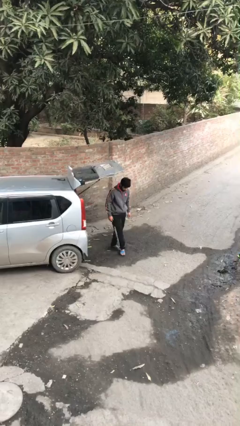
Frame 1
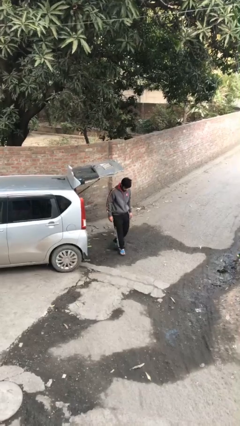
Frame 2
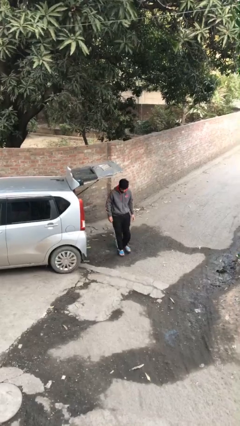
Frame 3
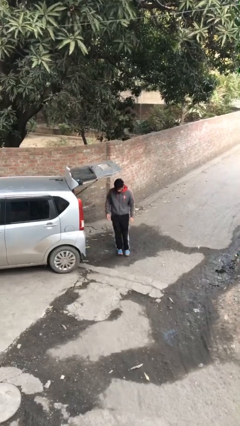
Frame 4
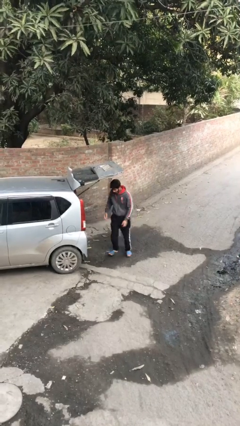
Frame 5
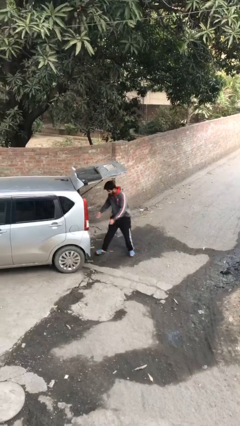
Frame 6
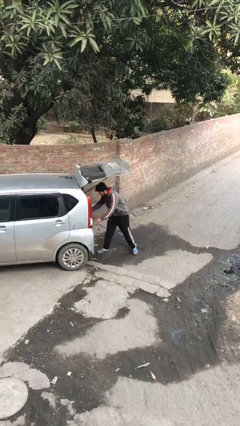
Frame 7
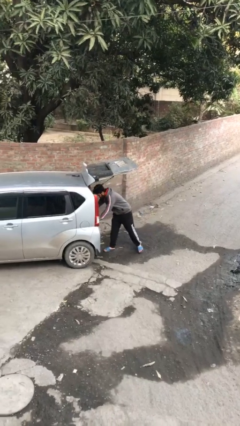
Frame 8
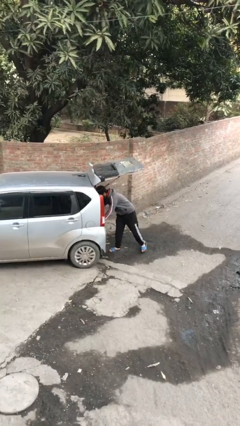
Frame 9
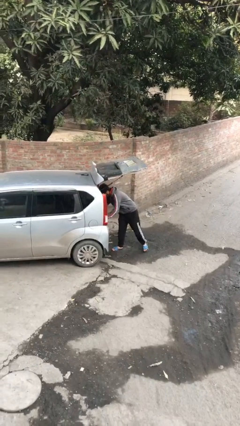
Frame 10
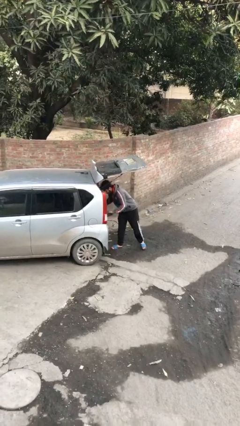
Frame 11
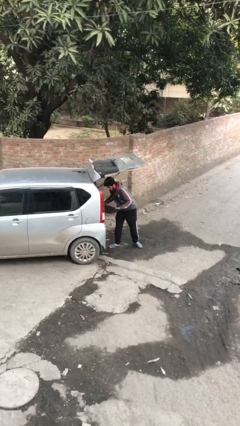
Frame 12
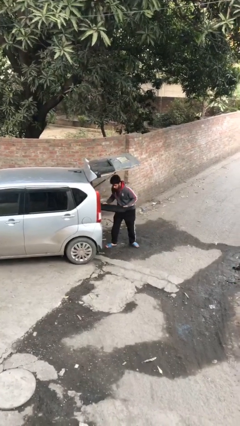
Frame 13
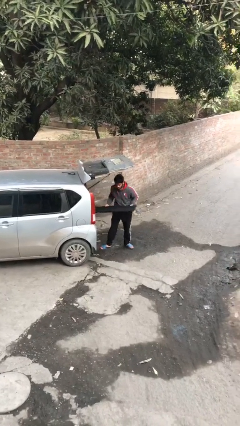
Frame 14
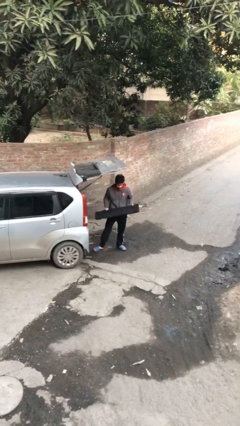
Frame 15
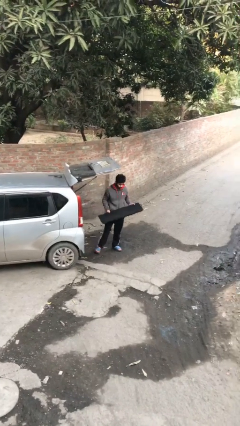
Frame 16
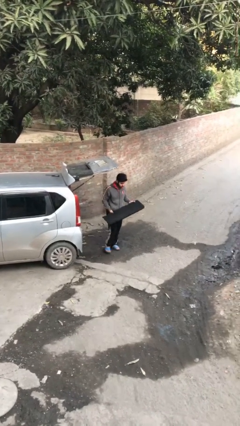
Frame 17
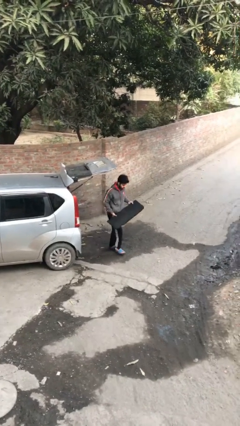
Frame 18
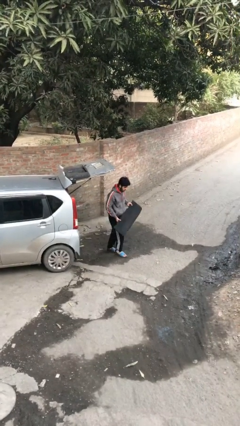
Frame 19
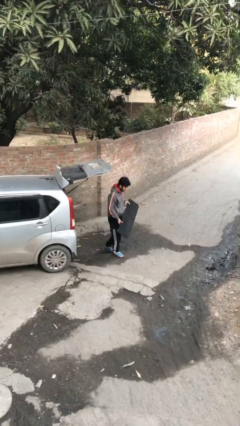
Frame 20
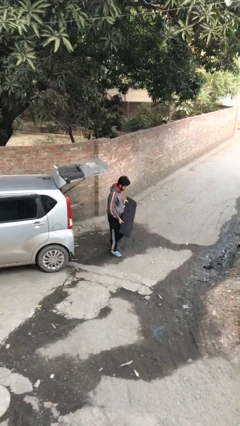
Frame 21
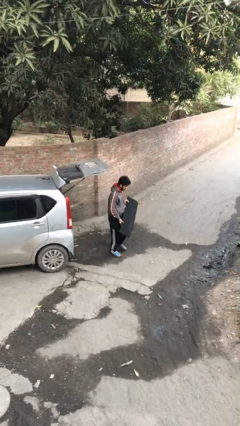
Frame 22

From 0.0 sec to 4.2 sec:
person unloads car

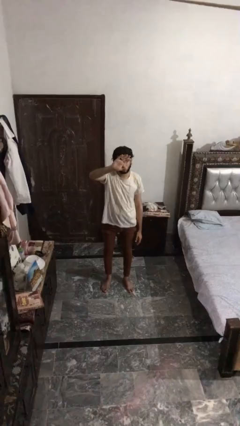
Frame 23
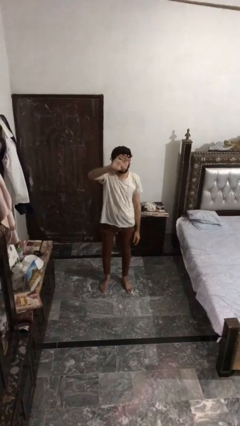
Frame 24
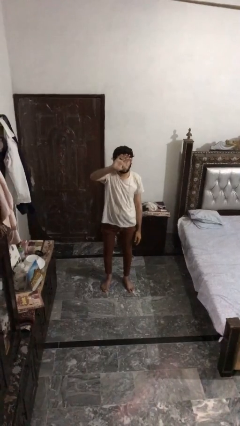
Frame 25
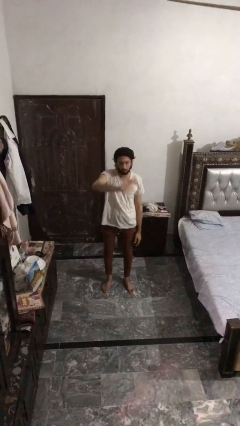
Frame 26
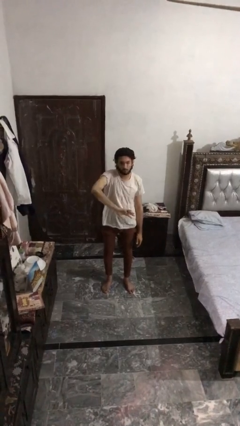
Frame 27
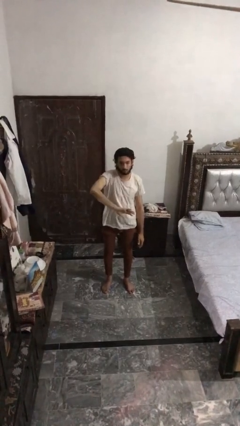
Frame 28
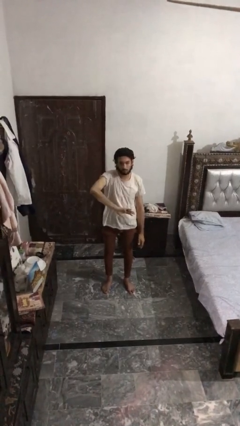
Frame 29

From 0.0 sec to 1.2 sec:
person gestures swipe down

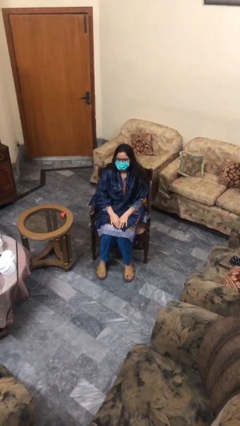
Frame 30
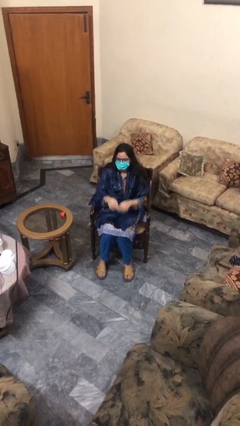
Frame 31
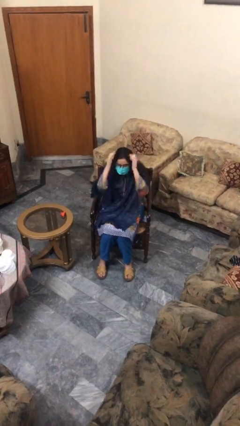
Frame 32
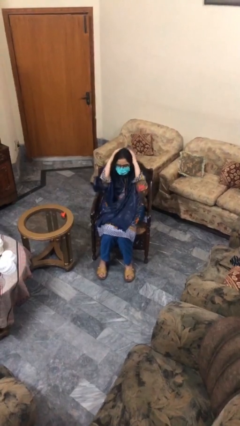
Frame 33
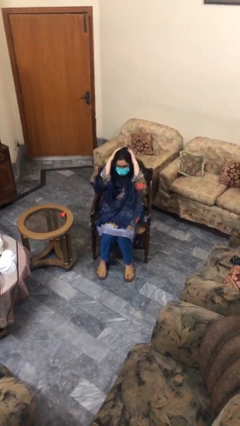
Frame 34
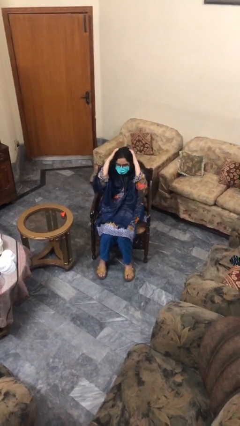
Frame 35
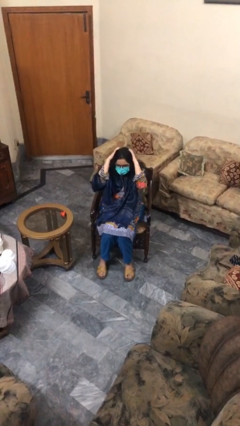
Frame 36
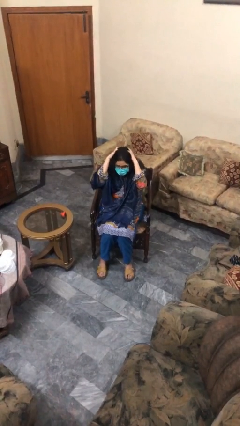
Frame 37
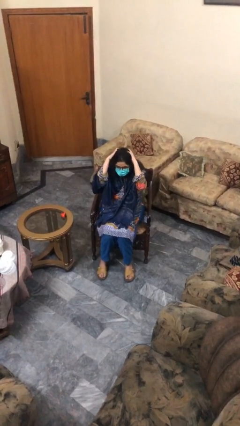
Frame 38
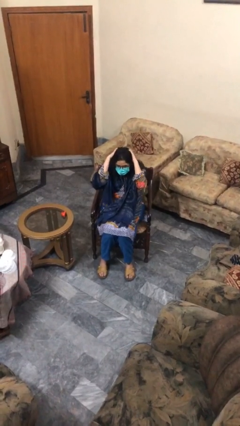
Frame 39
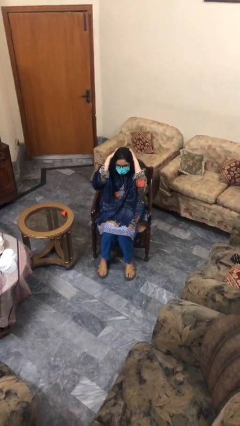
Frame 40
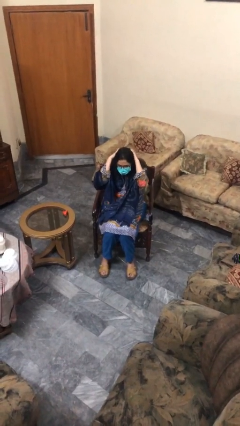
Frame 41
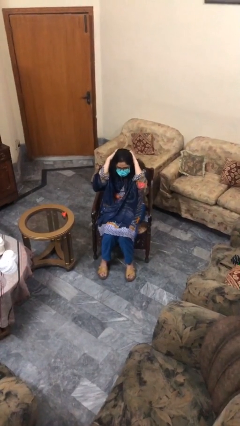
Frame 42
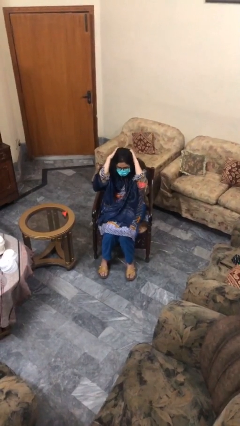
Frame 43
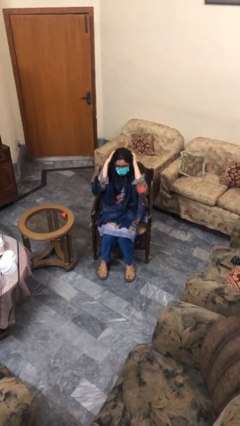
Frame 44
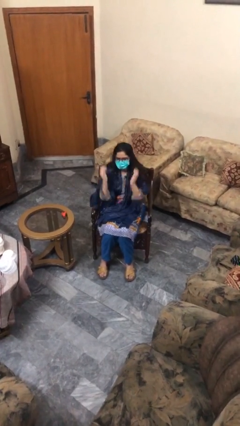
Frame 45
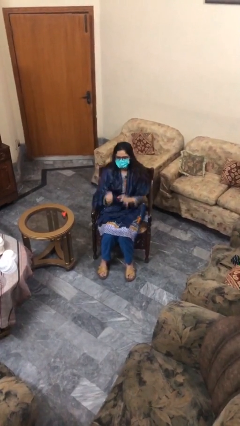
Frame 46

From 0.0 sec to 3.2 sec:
person pats head

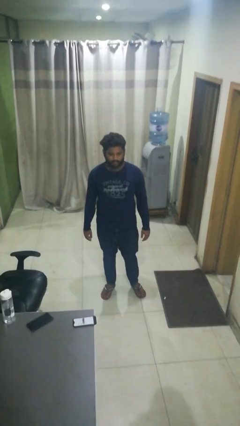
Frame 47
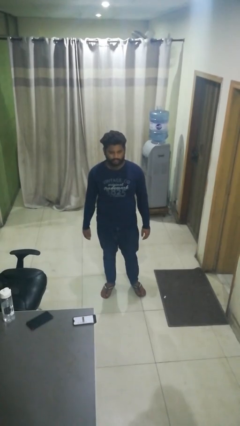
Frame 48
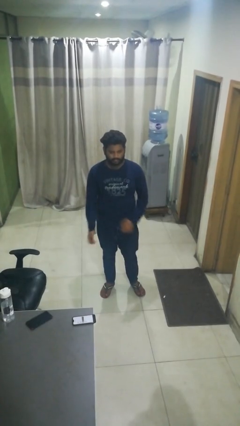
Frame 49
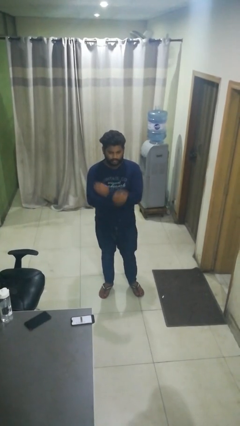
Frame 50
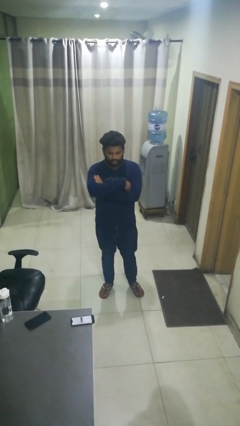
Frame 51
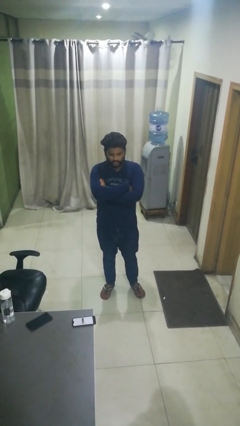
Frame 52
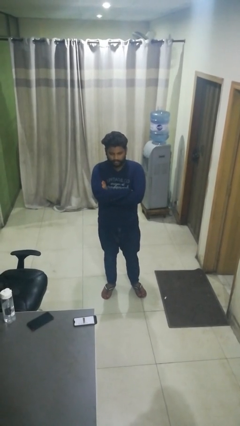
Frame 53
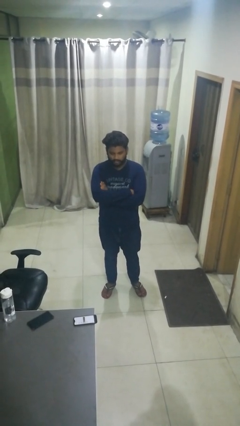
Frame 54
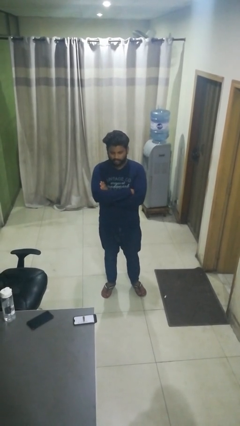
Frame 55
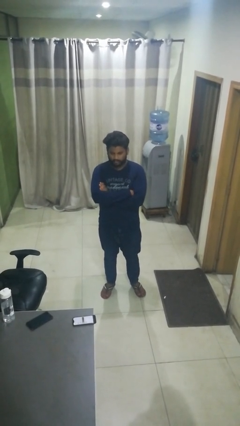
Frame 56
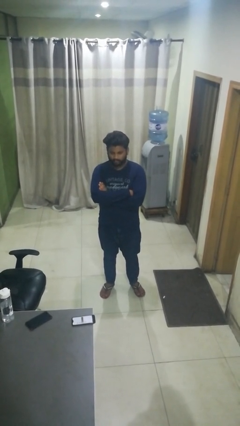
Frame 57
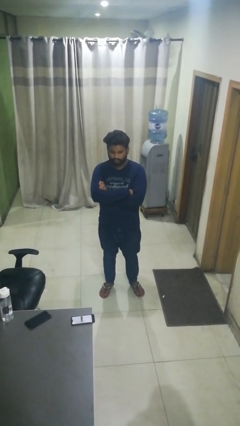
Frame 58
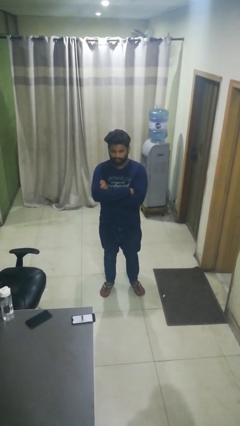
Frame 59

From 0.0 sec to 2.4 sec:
person crosses arms

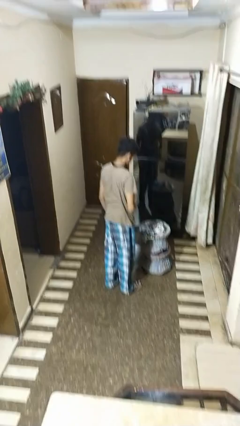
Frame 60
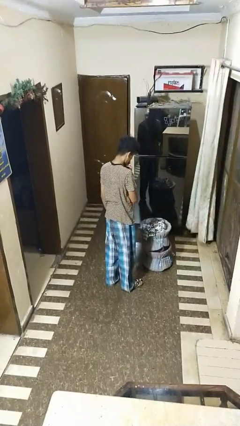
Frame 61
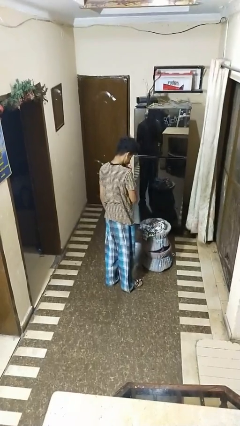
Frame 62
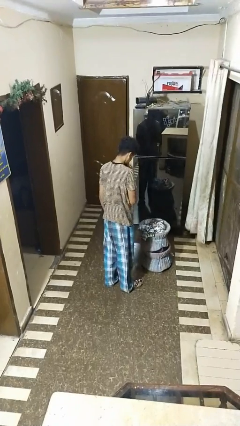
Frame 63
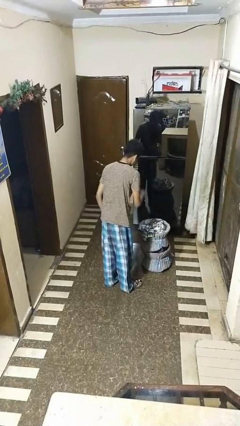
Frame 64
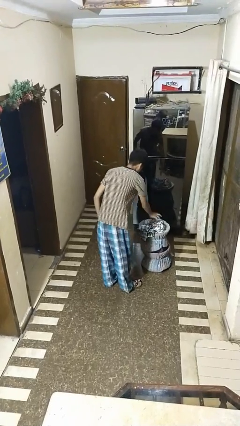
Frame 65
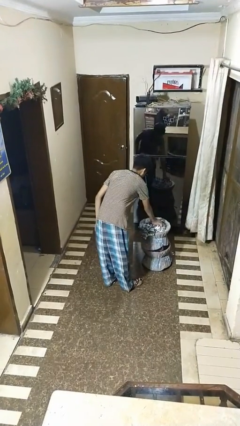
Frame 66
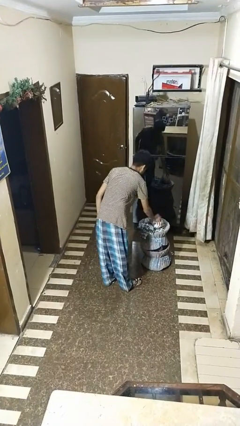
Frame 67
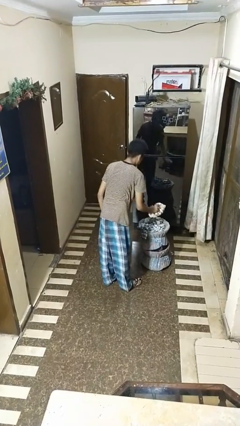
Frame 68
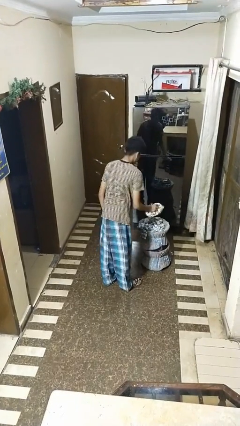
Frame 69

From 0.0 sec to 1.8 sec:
person takes object from basket

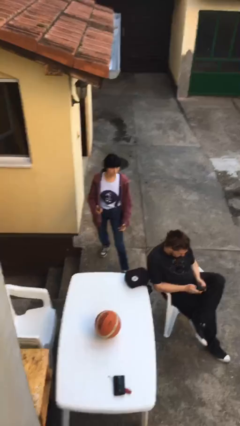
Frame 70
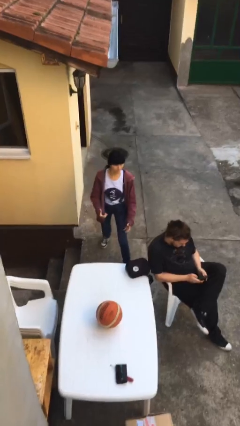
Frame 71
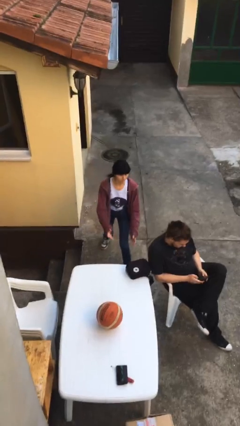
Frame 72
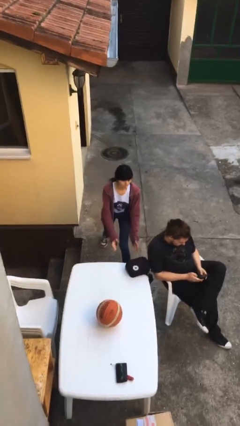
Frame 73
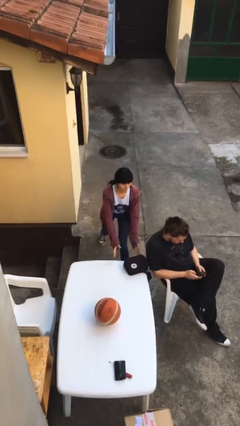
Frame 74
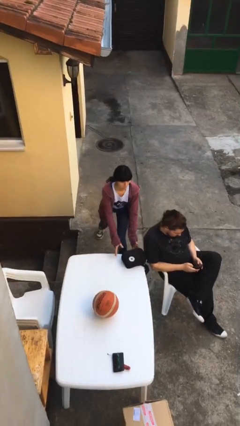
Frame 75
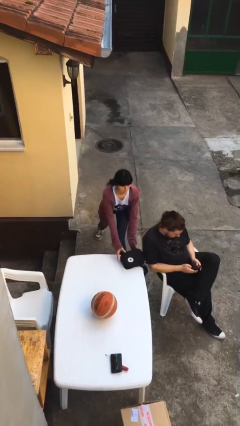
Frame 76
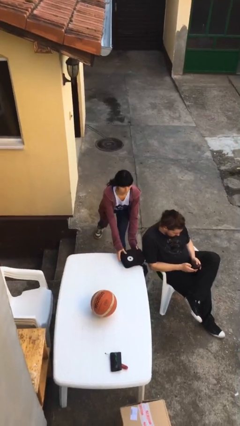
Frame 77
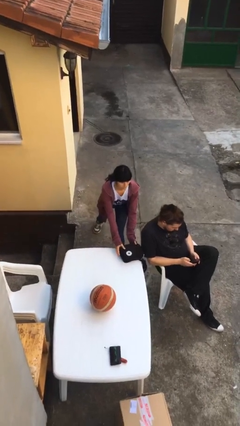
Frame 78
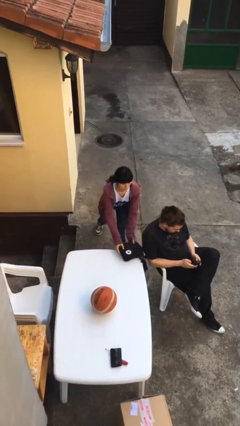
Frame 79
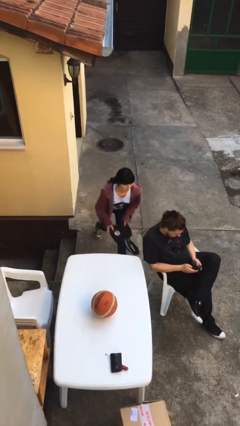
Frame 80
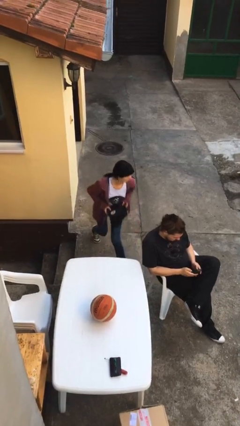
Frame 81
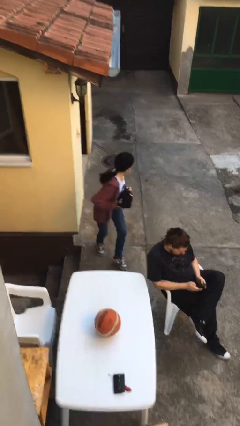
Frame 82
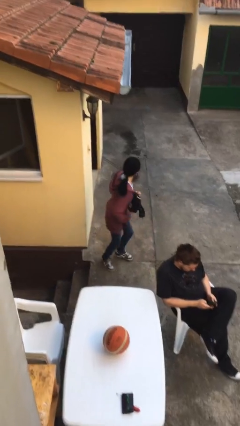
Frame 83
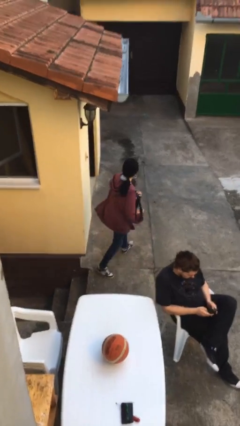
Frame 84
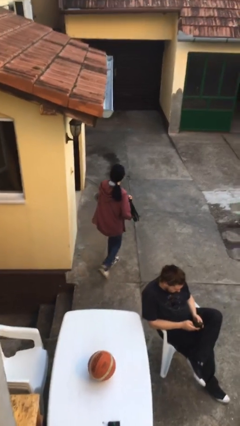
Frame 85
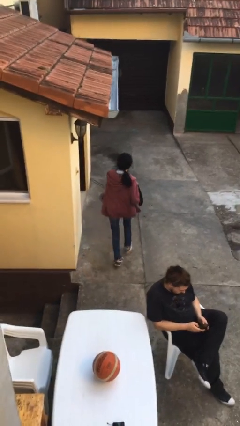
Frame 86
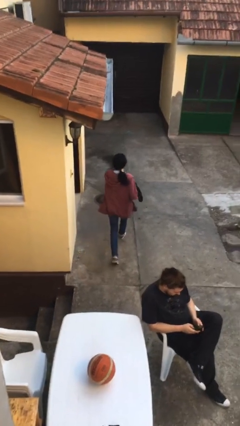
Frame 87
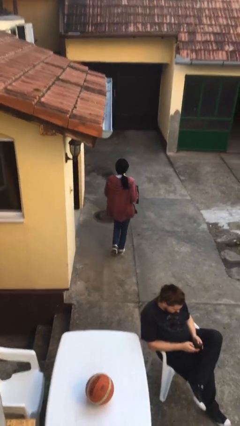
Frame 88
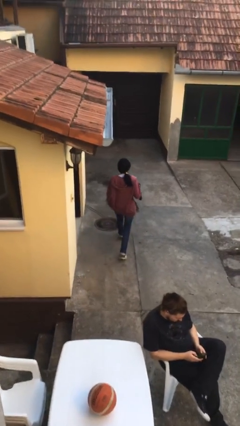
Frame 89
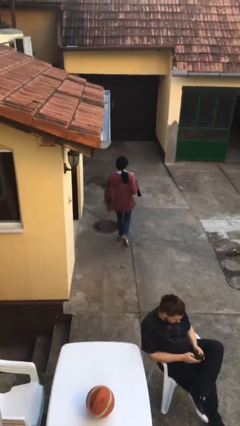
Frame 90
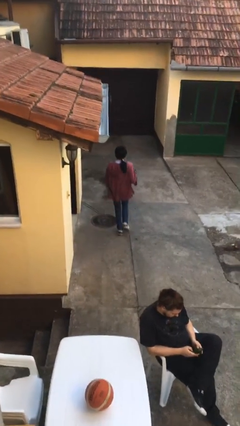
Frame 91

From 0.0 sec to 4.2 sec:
person steals object from person

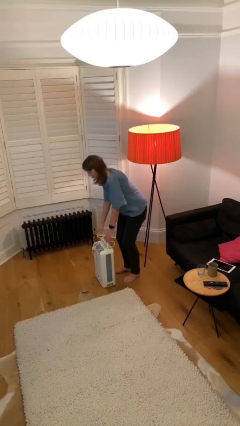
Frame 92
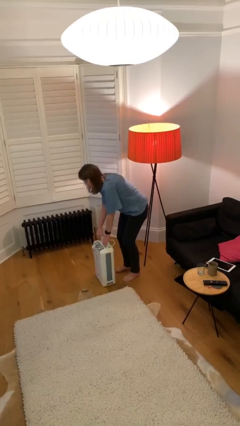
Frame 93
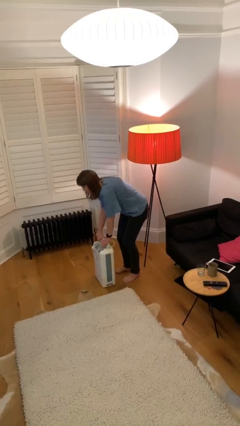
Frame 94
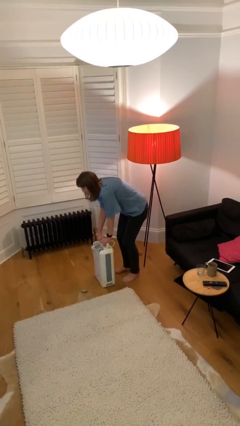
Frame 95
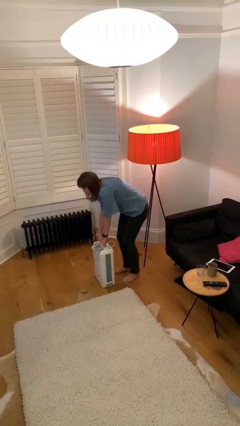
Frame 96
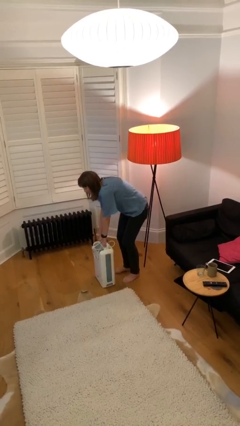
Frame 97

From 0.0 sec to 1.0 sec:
person picks up object from floor
